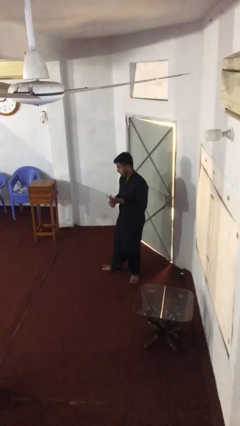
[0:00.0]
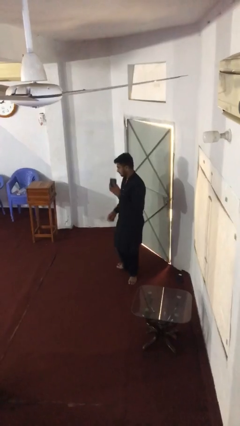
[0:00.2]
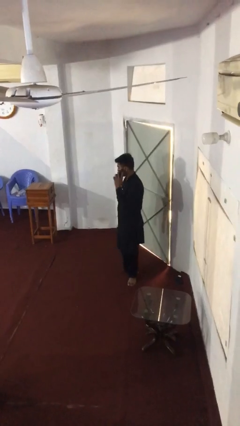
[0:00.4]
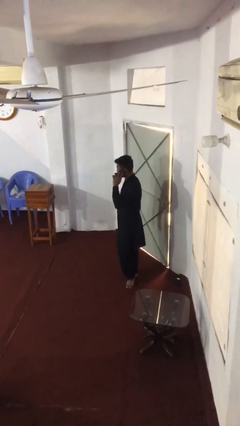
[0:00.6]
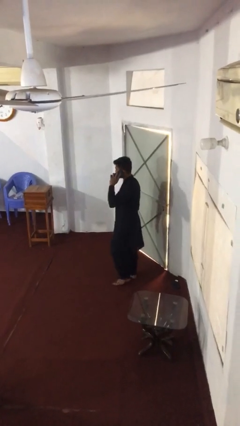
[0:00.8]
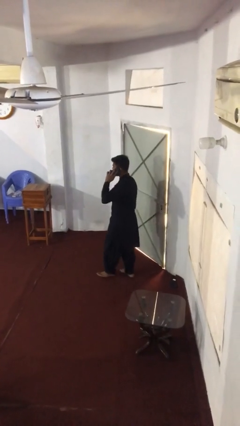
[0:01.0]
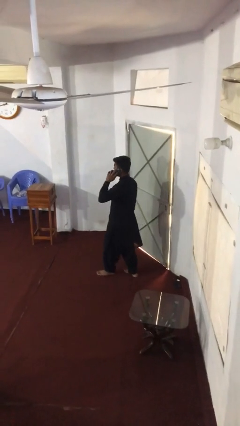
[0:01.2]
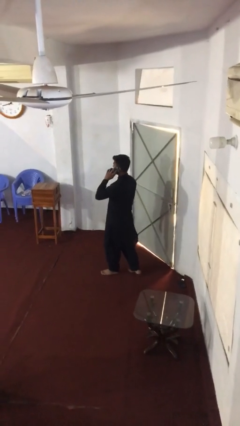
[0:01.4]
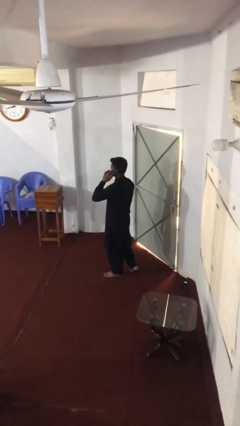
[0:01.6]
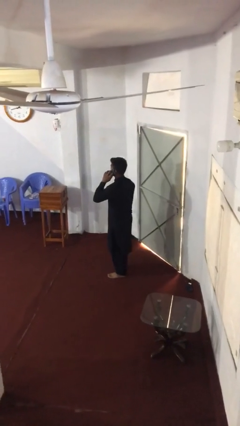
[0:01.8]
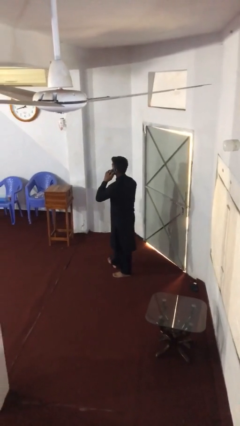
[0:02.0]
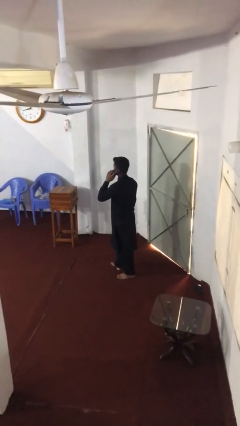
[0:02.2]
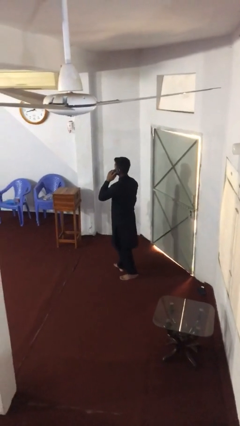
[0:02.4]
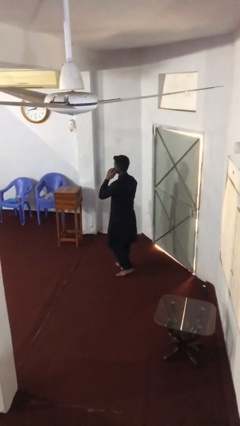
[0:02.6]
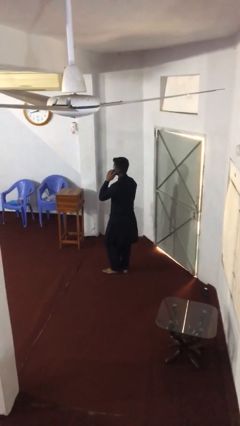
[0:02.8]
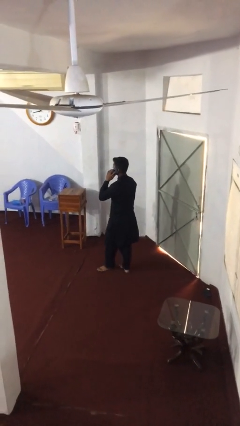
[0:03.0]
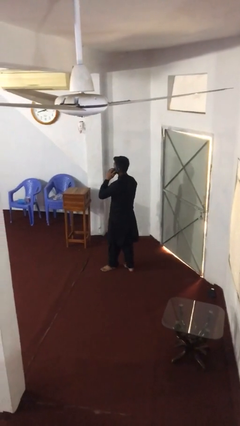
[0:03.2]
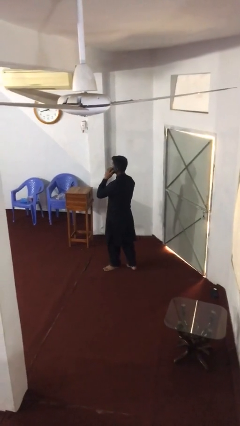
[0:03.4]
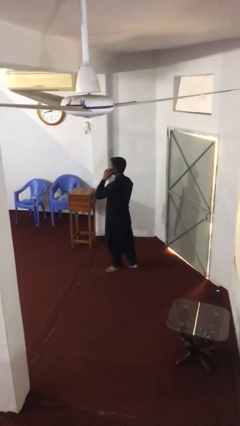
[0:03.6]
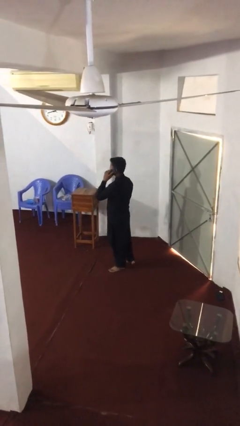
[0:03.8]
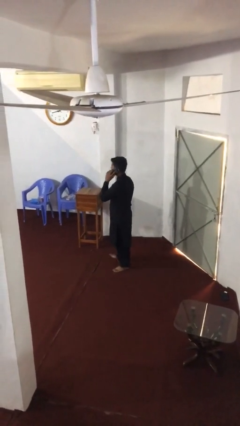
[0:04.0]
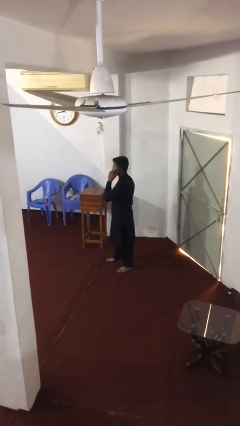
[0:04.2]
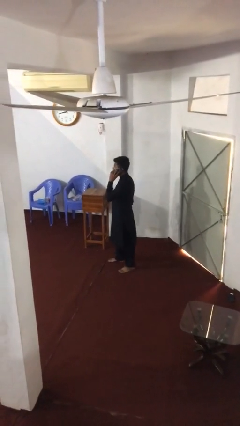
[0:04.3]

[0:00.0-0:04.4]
person talks on phone

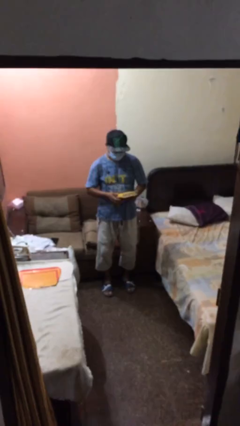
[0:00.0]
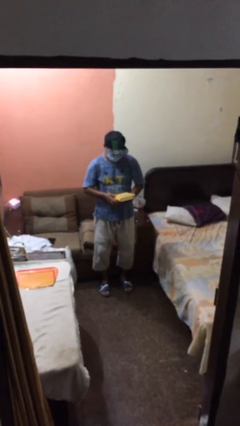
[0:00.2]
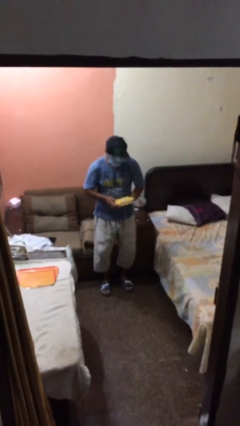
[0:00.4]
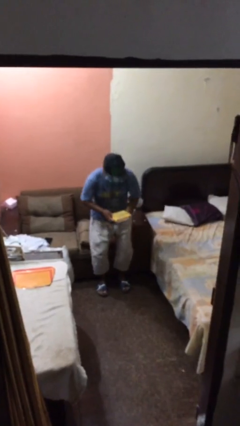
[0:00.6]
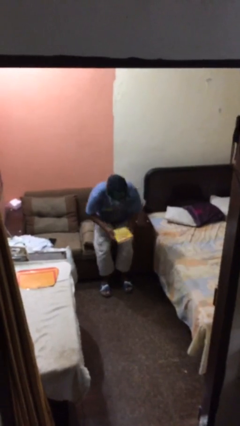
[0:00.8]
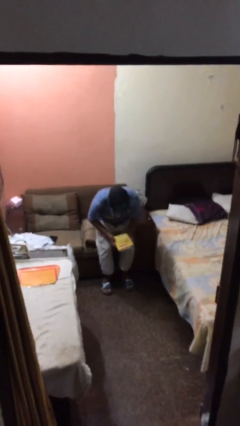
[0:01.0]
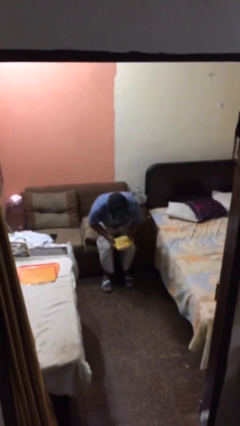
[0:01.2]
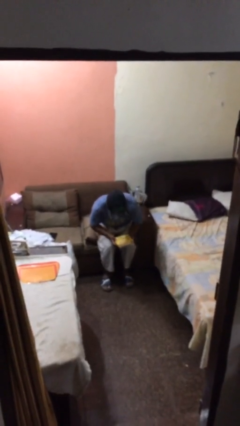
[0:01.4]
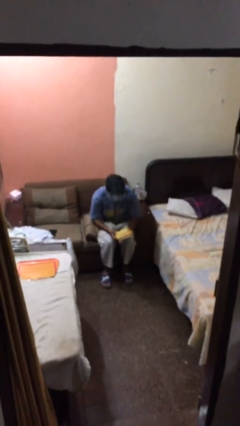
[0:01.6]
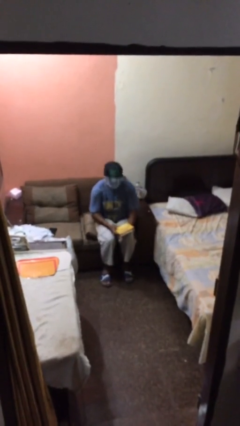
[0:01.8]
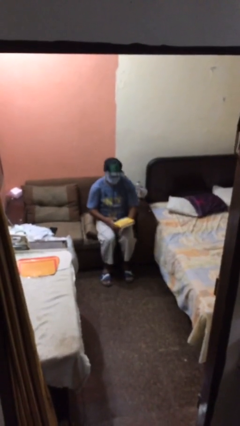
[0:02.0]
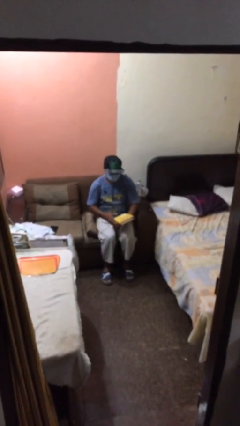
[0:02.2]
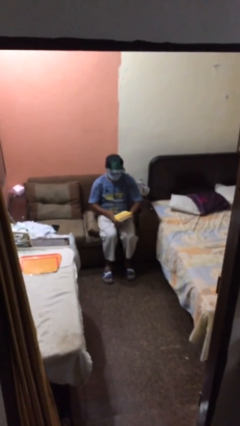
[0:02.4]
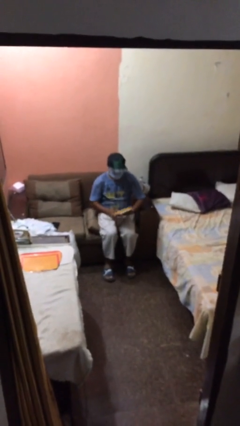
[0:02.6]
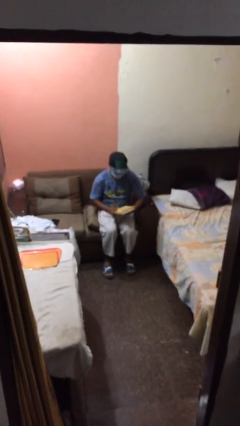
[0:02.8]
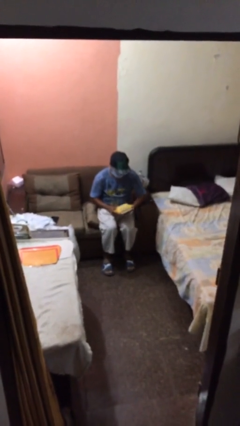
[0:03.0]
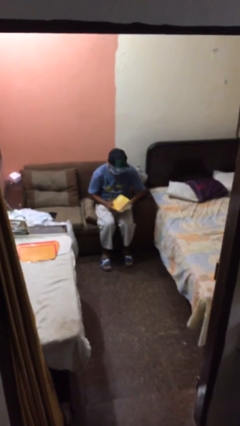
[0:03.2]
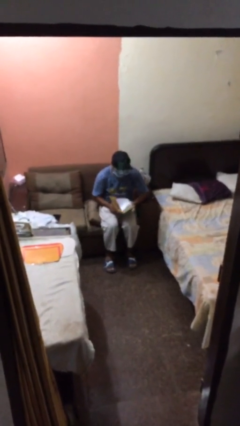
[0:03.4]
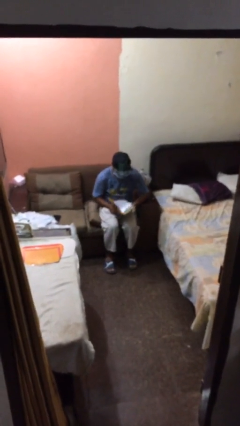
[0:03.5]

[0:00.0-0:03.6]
person sits down

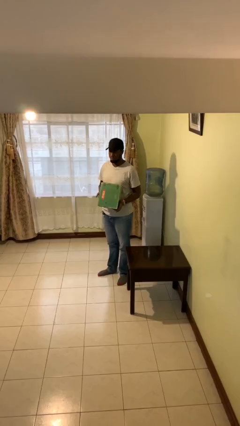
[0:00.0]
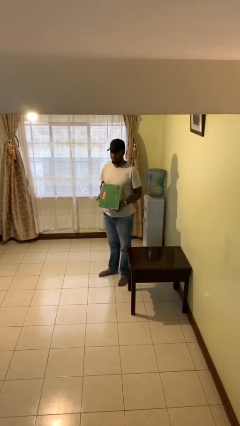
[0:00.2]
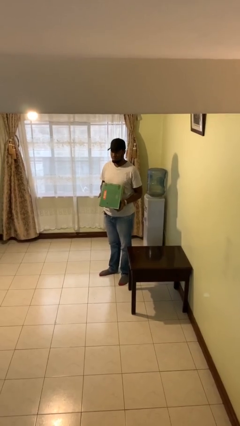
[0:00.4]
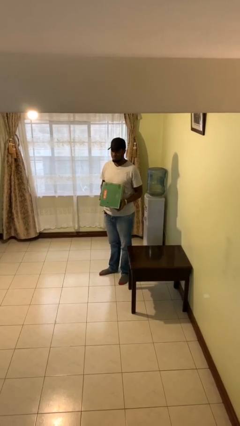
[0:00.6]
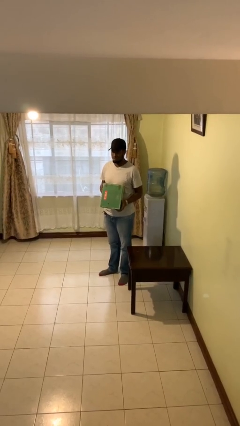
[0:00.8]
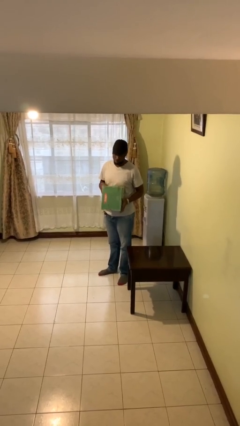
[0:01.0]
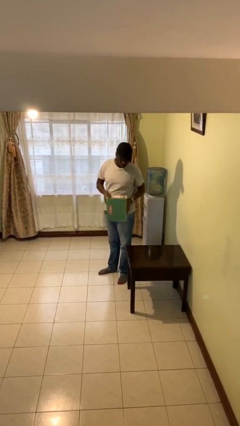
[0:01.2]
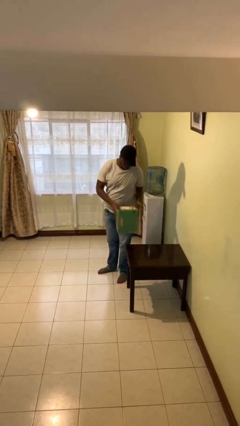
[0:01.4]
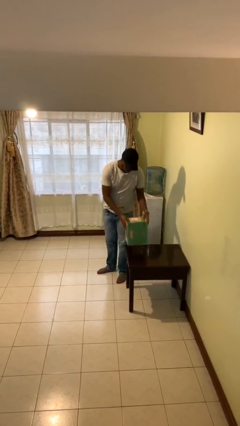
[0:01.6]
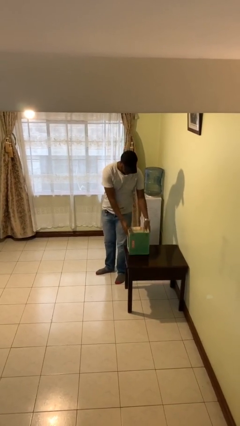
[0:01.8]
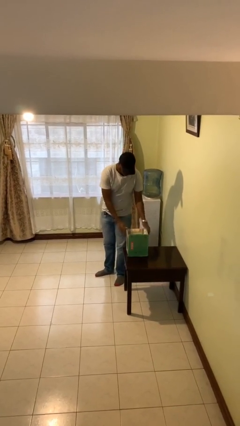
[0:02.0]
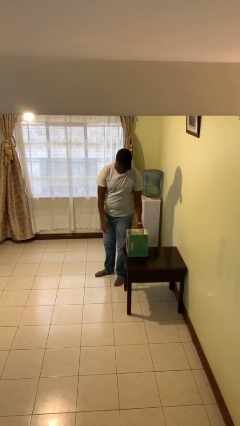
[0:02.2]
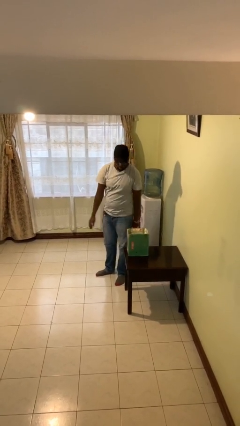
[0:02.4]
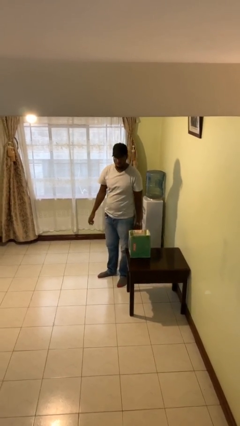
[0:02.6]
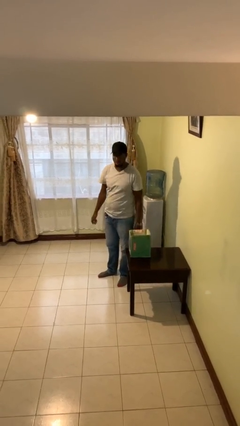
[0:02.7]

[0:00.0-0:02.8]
person puts down object on table

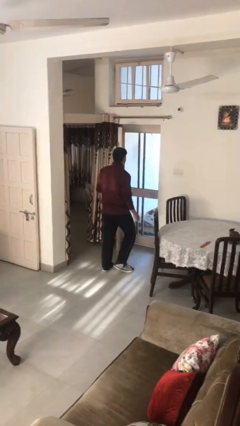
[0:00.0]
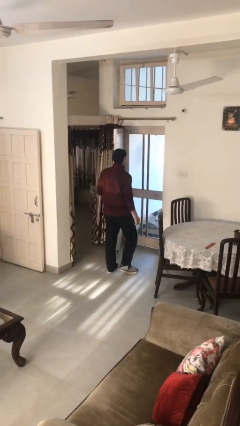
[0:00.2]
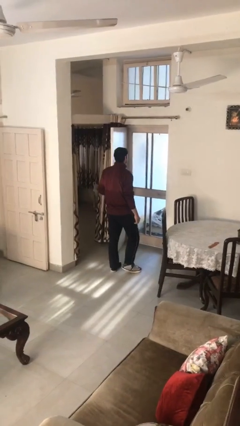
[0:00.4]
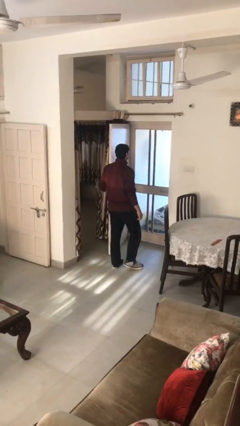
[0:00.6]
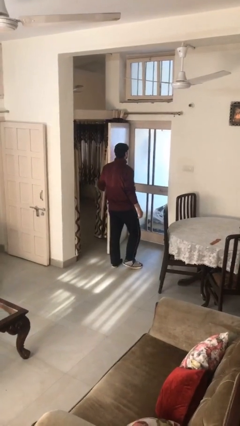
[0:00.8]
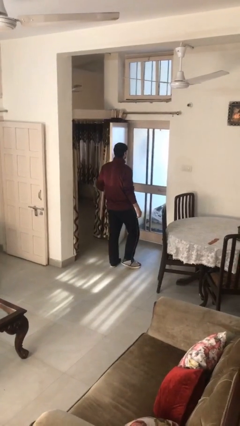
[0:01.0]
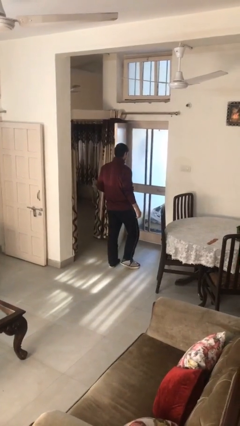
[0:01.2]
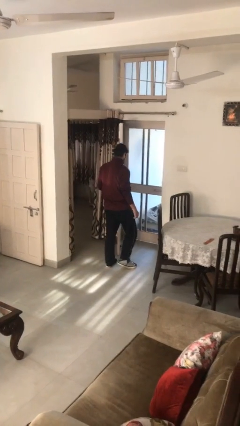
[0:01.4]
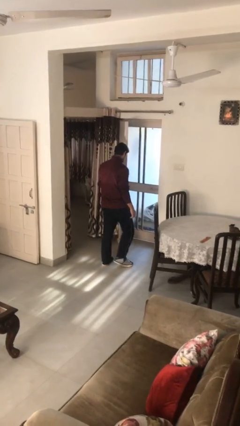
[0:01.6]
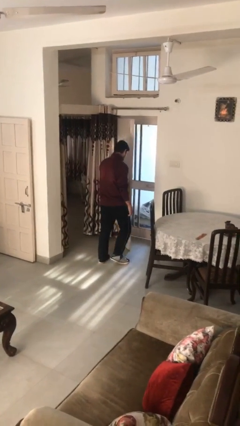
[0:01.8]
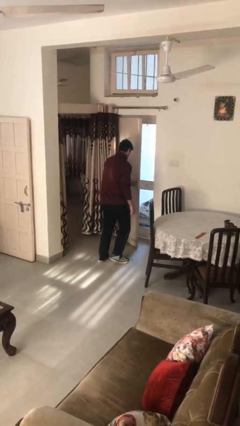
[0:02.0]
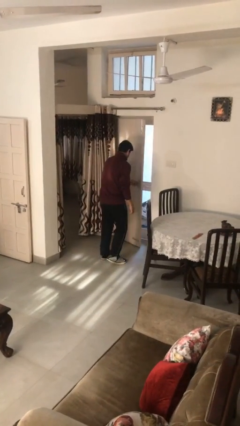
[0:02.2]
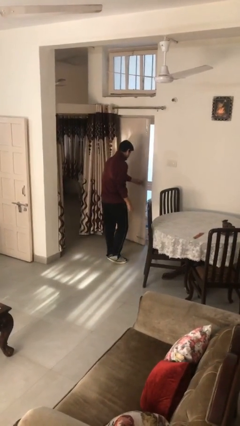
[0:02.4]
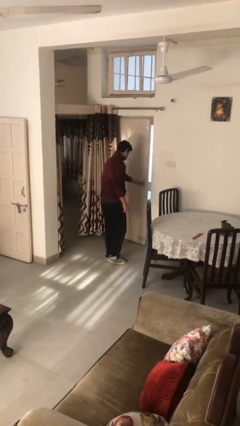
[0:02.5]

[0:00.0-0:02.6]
person closes facility door
